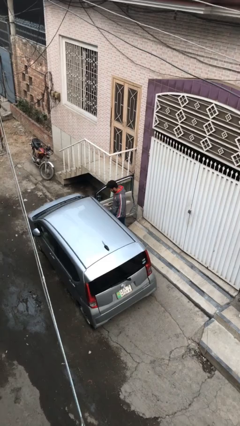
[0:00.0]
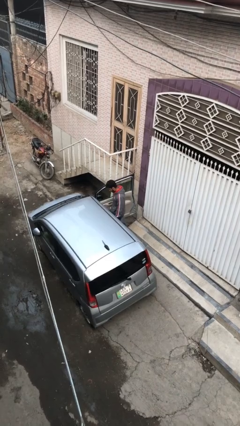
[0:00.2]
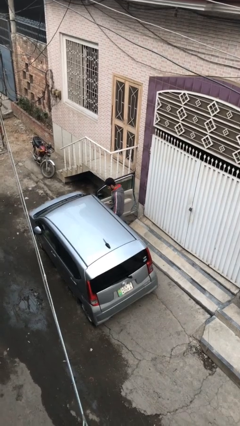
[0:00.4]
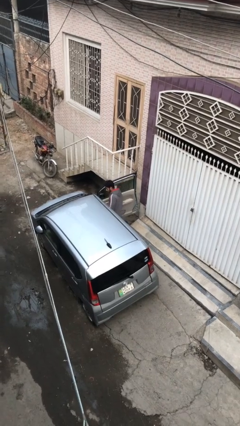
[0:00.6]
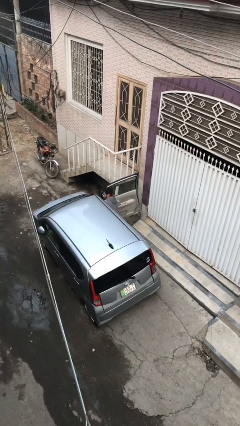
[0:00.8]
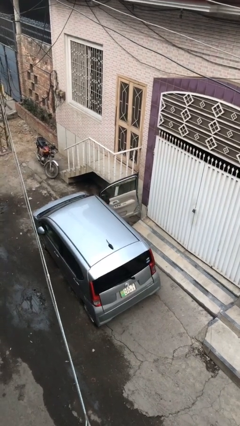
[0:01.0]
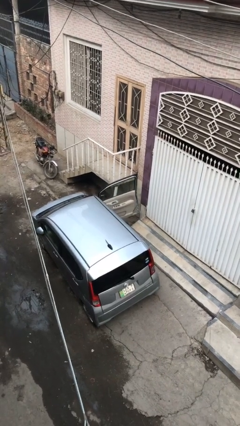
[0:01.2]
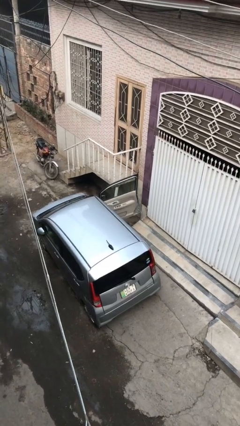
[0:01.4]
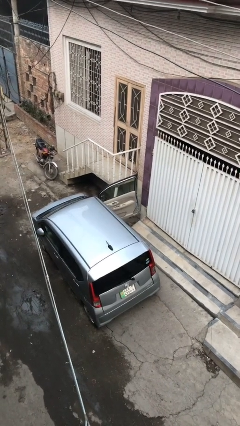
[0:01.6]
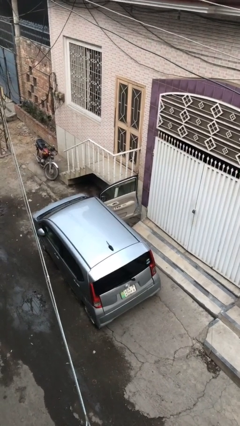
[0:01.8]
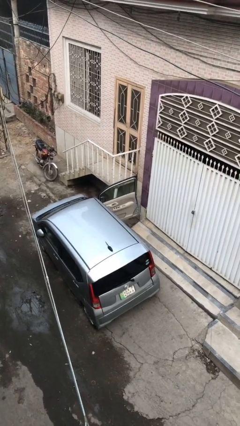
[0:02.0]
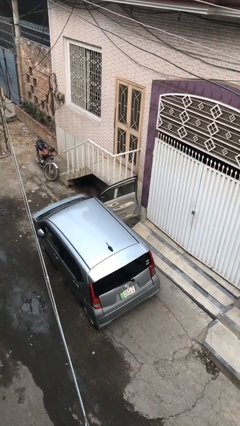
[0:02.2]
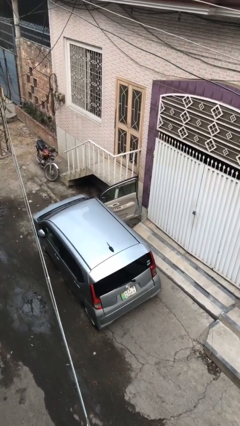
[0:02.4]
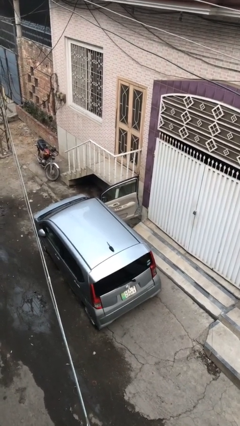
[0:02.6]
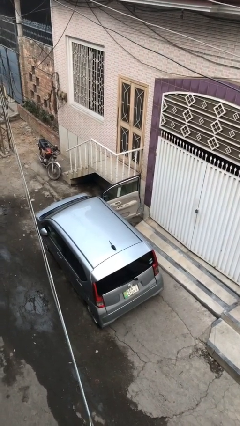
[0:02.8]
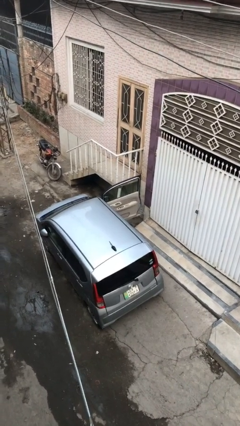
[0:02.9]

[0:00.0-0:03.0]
person enters car

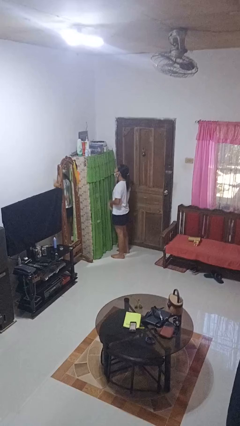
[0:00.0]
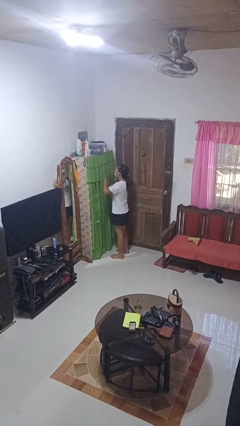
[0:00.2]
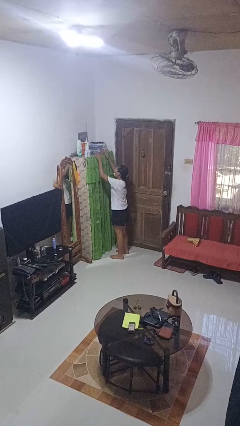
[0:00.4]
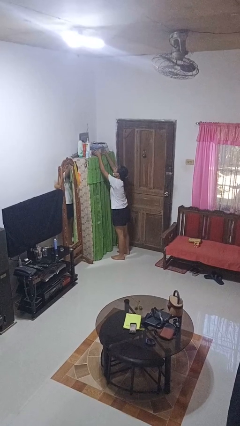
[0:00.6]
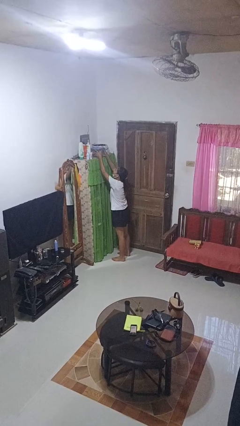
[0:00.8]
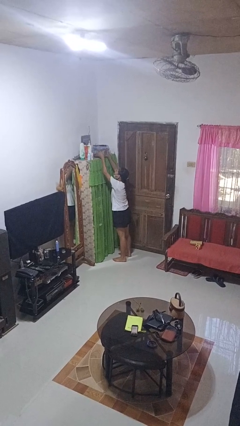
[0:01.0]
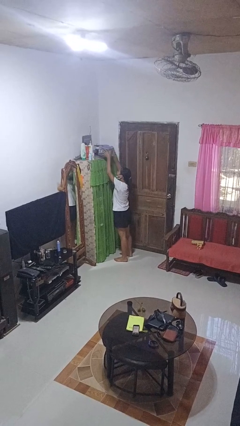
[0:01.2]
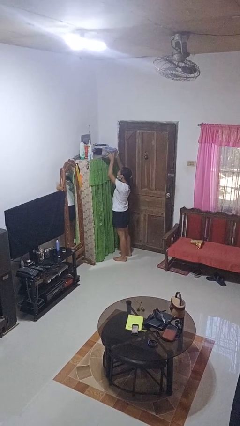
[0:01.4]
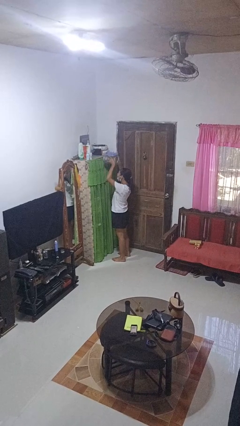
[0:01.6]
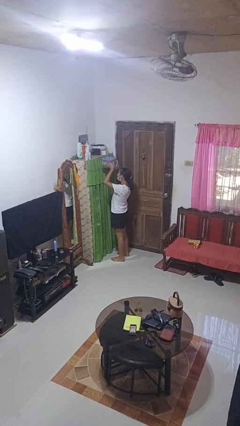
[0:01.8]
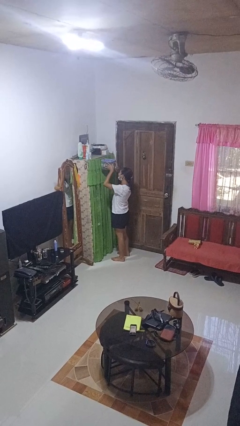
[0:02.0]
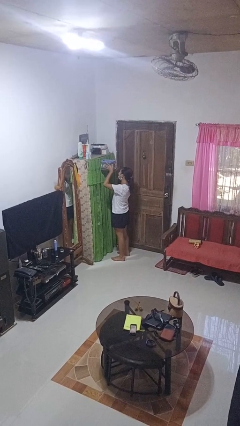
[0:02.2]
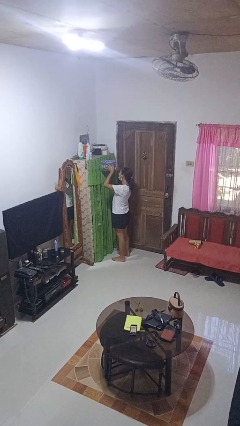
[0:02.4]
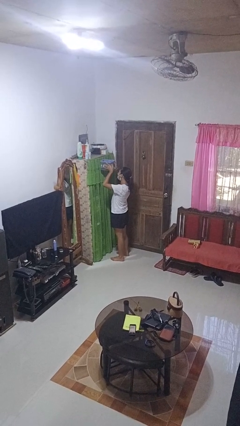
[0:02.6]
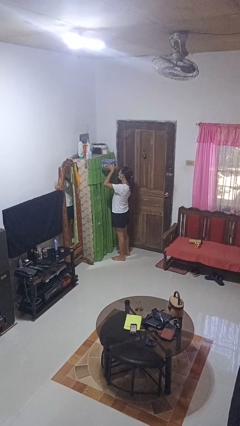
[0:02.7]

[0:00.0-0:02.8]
person picks up object from shelf

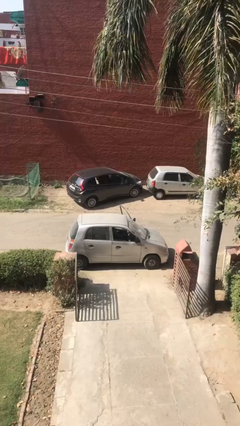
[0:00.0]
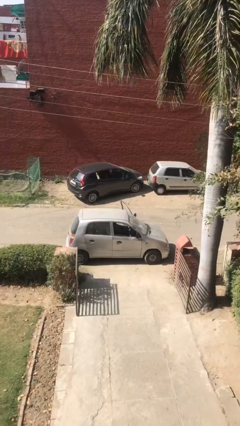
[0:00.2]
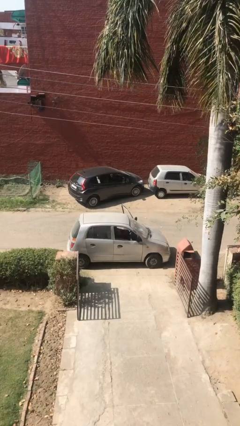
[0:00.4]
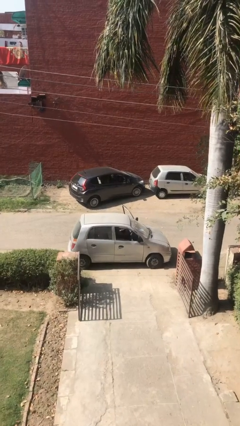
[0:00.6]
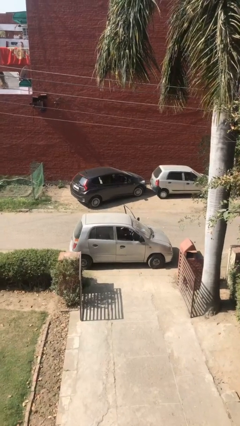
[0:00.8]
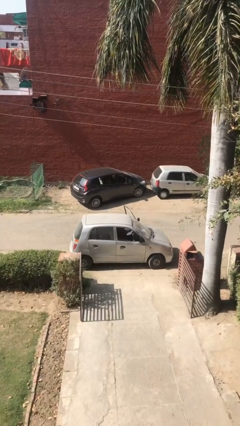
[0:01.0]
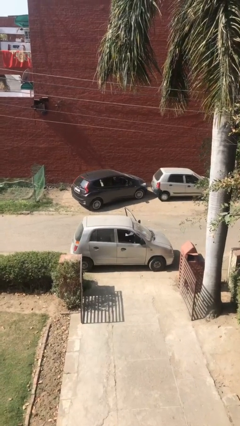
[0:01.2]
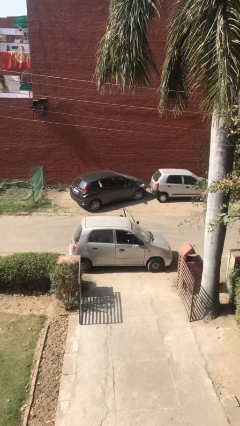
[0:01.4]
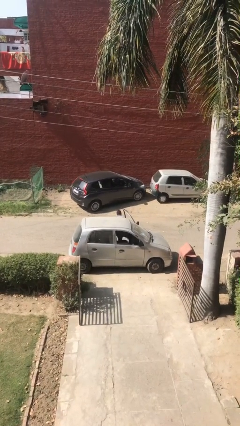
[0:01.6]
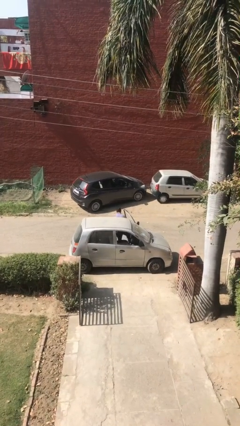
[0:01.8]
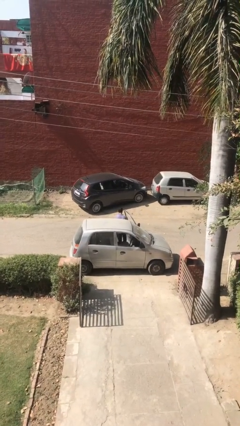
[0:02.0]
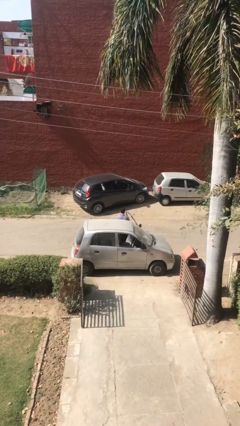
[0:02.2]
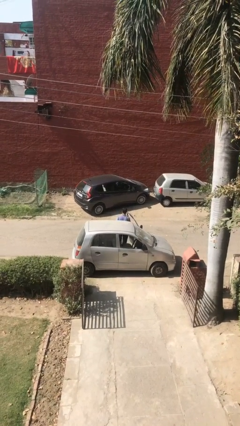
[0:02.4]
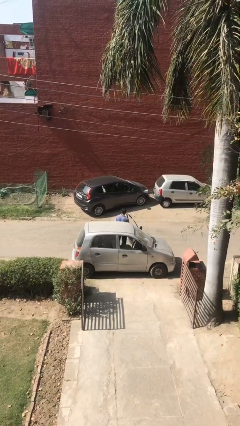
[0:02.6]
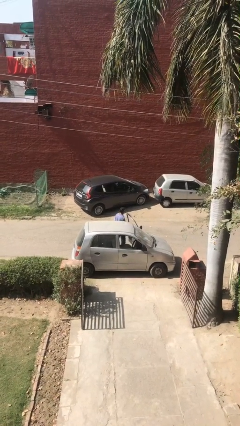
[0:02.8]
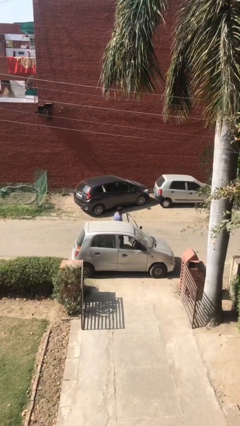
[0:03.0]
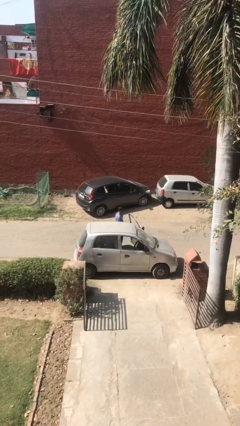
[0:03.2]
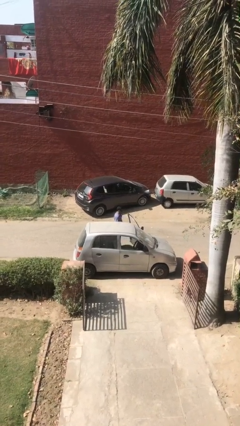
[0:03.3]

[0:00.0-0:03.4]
person exits car

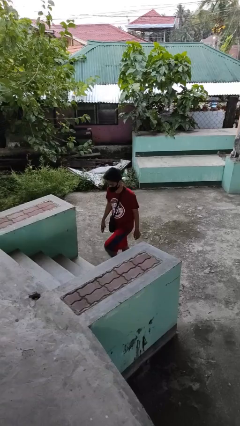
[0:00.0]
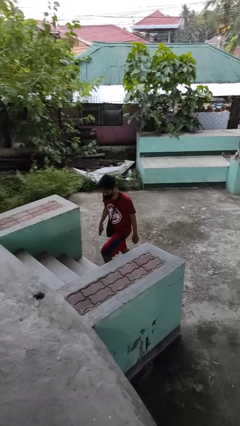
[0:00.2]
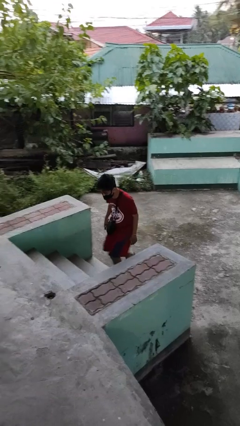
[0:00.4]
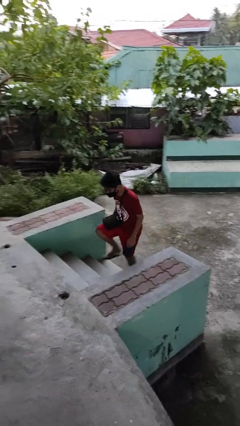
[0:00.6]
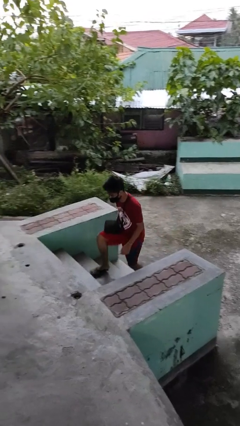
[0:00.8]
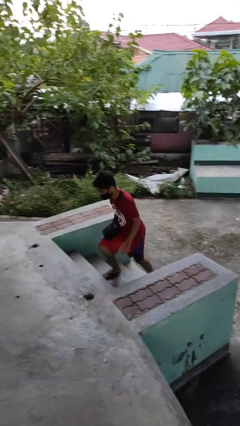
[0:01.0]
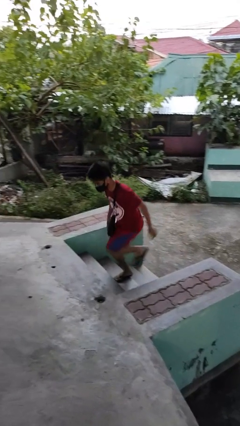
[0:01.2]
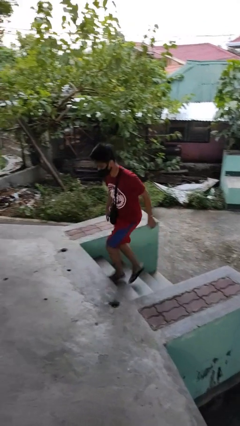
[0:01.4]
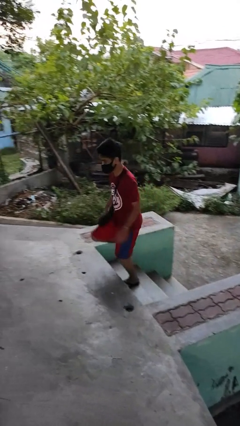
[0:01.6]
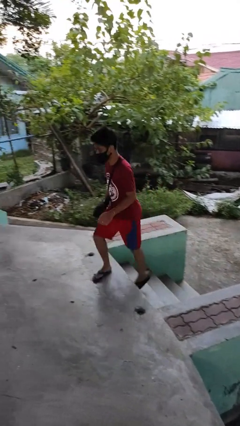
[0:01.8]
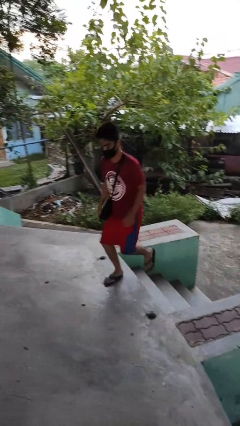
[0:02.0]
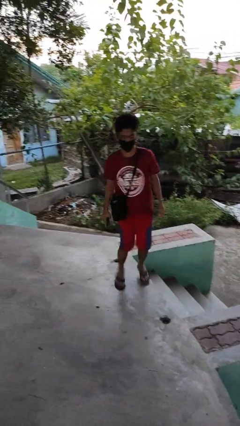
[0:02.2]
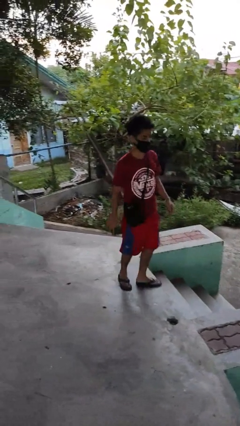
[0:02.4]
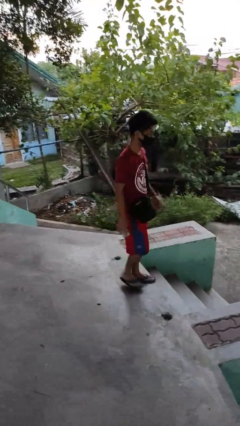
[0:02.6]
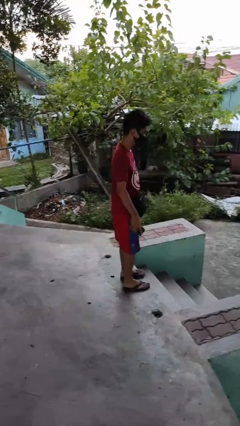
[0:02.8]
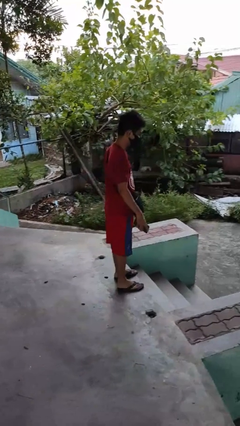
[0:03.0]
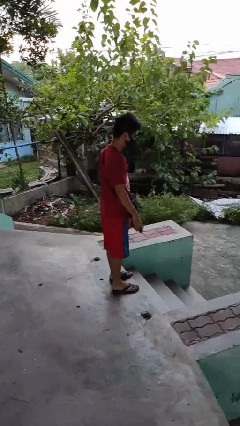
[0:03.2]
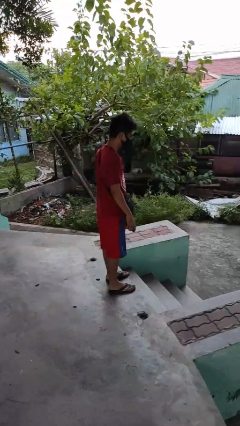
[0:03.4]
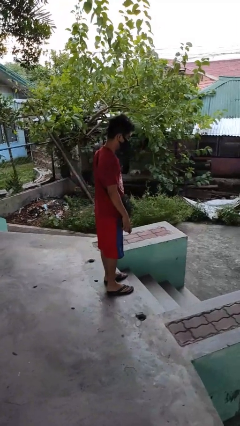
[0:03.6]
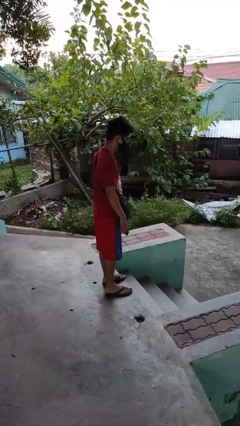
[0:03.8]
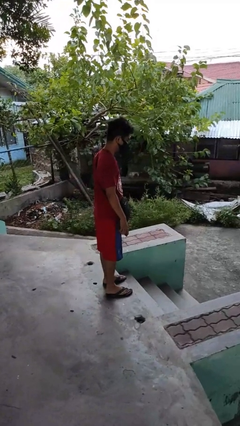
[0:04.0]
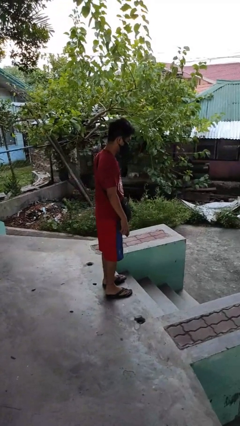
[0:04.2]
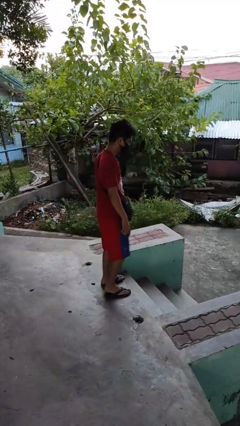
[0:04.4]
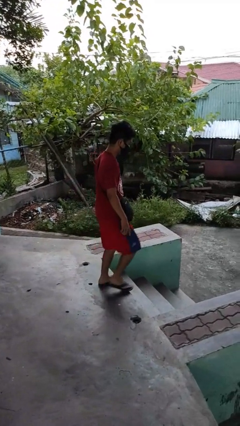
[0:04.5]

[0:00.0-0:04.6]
person climbs up stairs

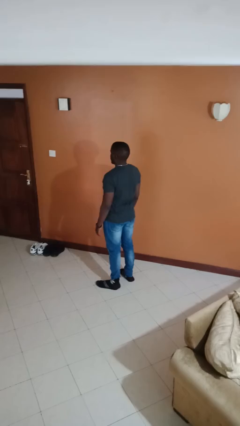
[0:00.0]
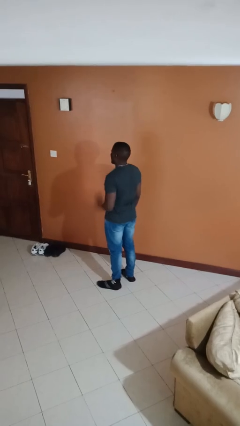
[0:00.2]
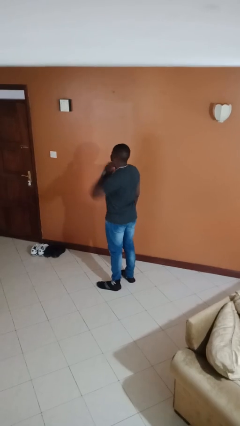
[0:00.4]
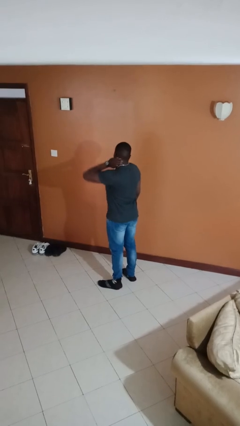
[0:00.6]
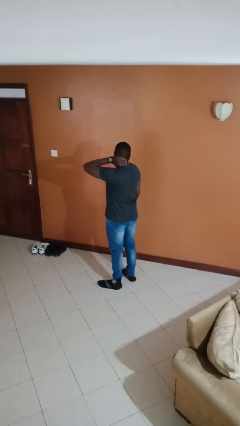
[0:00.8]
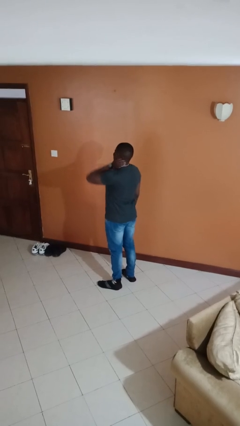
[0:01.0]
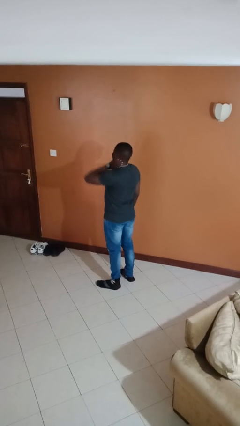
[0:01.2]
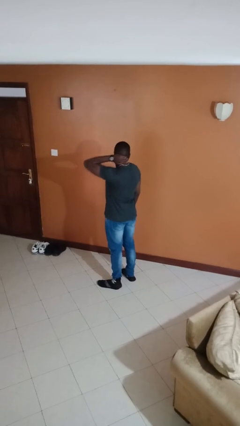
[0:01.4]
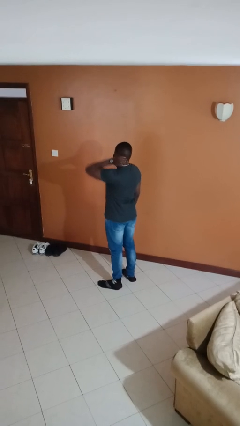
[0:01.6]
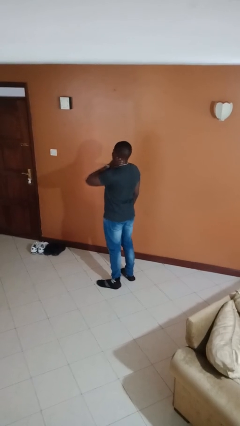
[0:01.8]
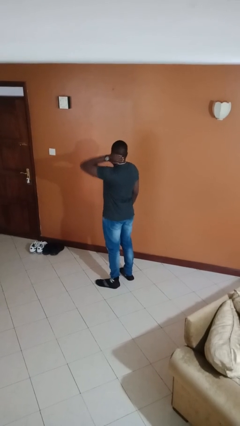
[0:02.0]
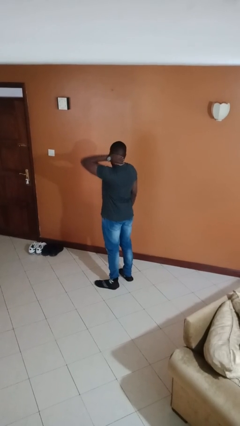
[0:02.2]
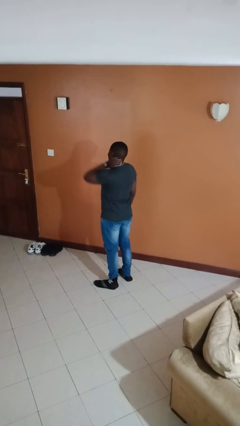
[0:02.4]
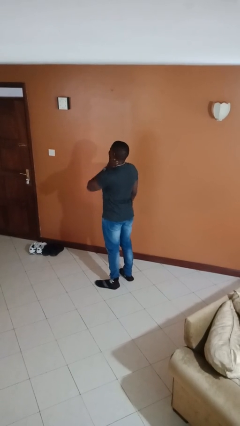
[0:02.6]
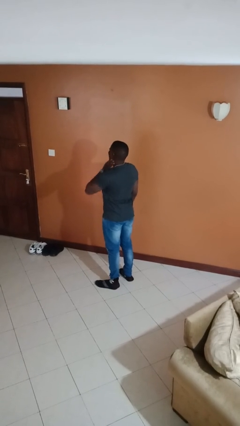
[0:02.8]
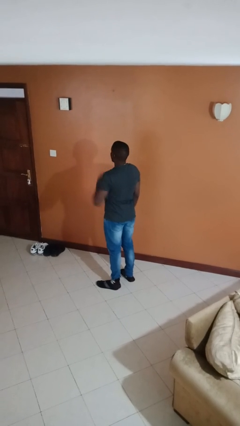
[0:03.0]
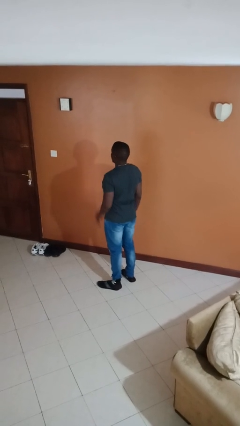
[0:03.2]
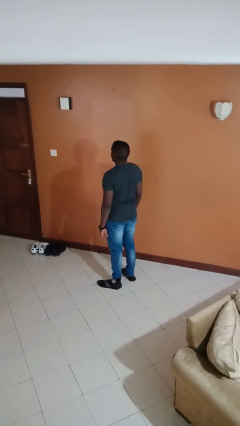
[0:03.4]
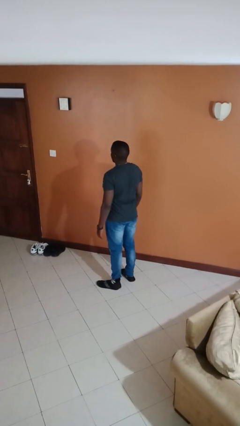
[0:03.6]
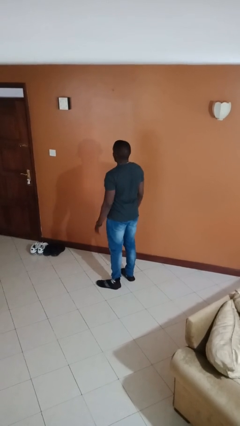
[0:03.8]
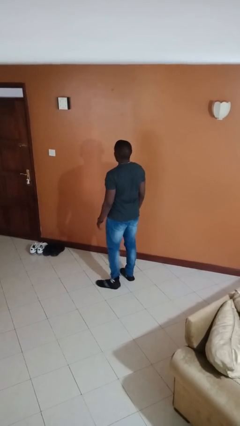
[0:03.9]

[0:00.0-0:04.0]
person rubs neck
